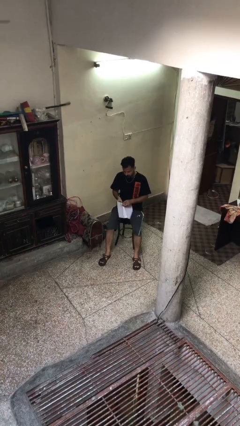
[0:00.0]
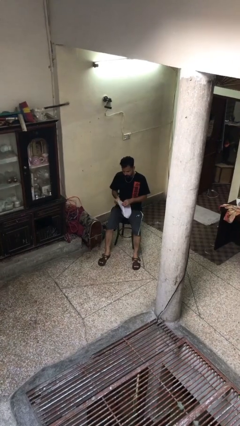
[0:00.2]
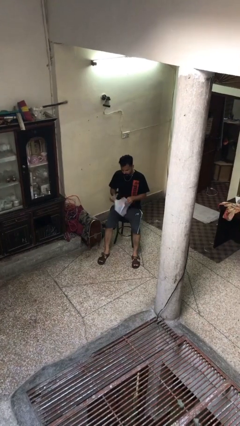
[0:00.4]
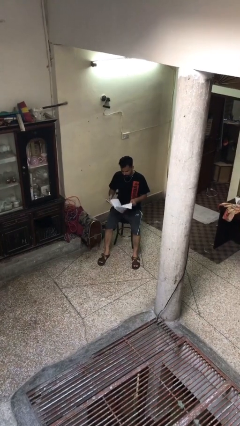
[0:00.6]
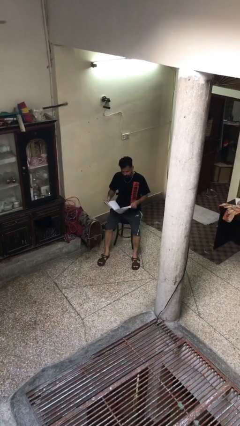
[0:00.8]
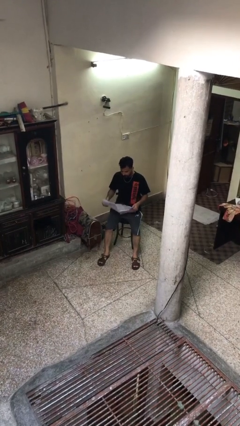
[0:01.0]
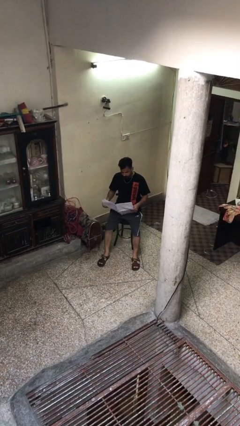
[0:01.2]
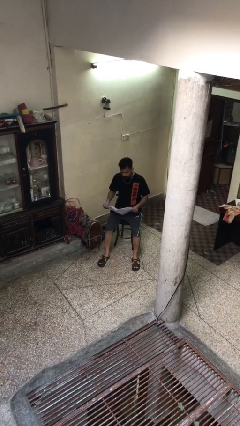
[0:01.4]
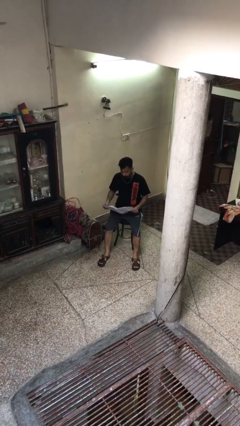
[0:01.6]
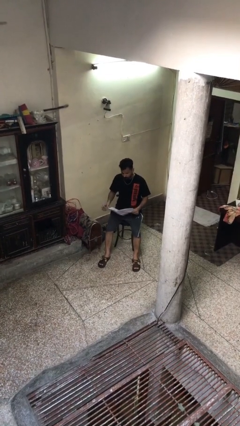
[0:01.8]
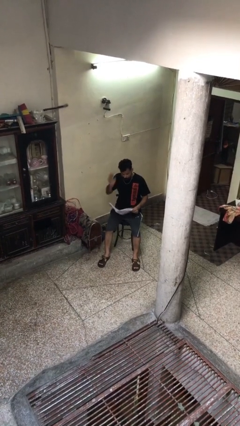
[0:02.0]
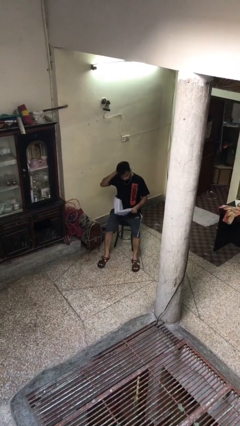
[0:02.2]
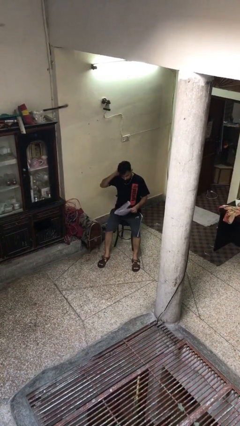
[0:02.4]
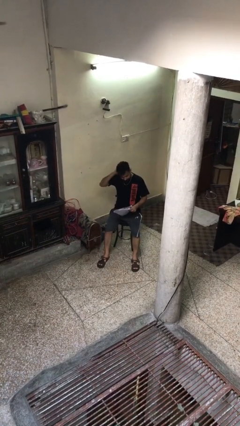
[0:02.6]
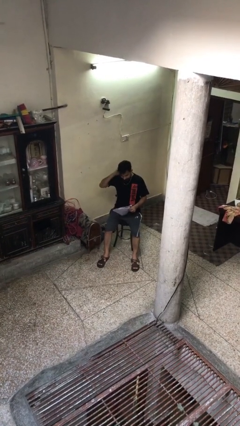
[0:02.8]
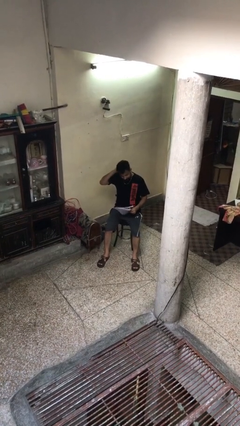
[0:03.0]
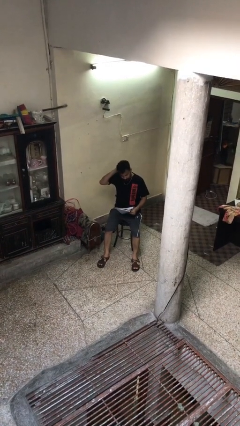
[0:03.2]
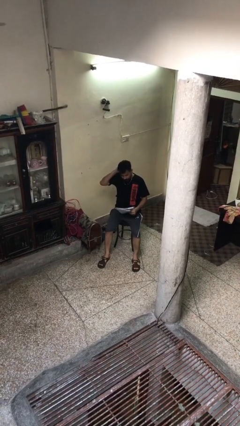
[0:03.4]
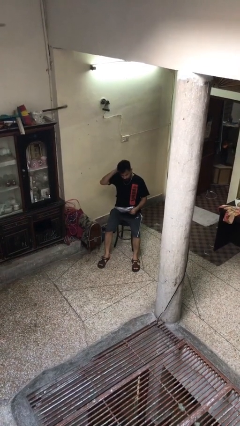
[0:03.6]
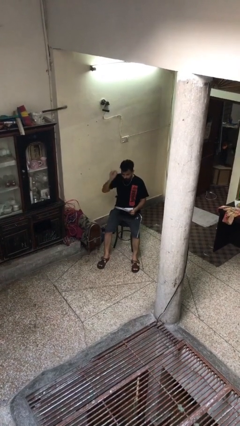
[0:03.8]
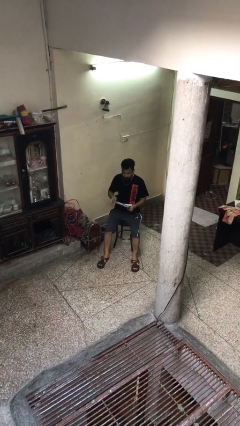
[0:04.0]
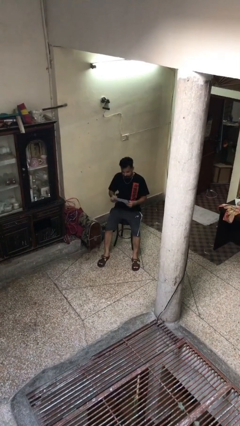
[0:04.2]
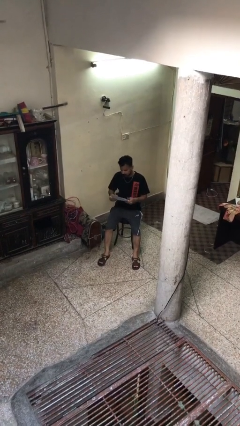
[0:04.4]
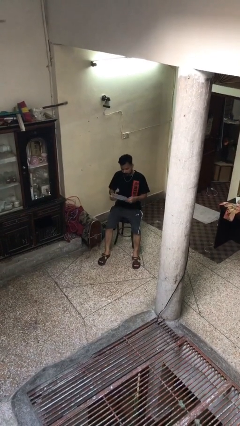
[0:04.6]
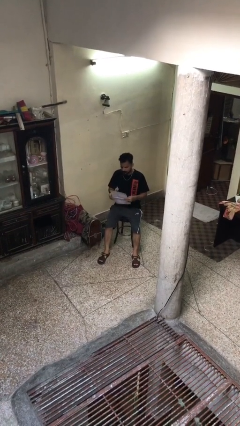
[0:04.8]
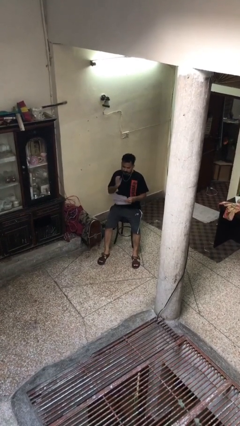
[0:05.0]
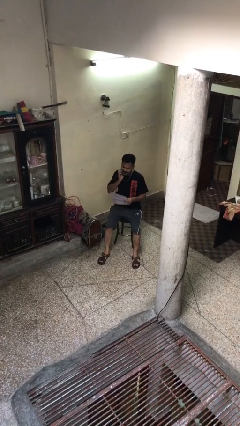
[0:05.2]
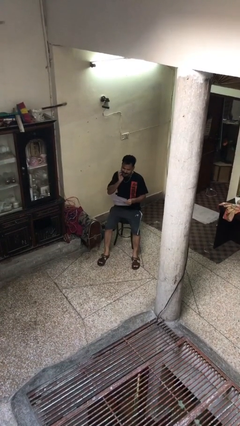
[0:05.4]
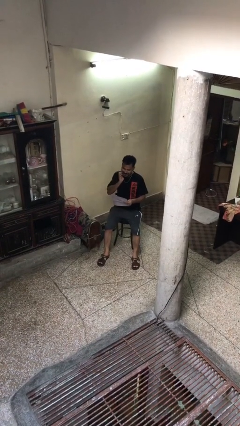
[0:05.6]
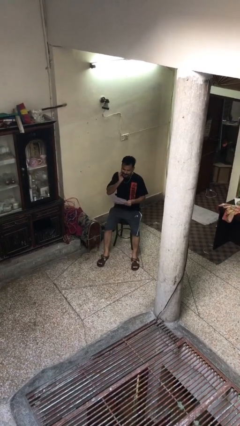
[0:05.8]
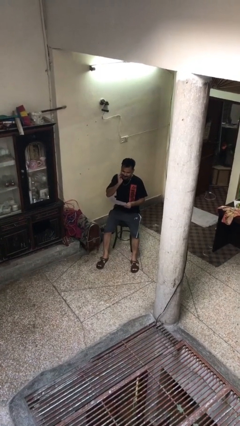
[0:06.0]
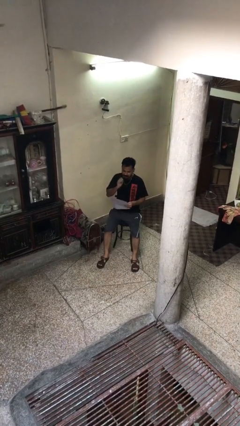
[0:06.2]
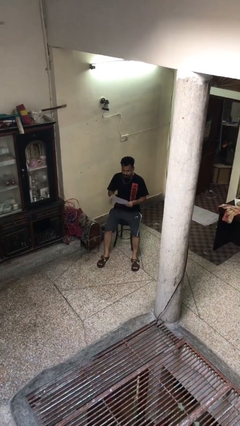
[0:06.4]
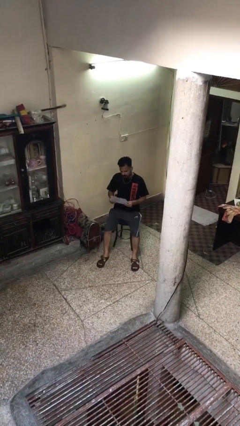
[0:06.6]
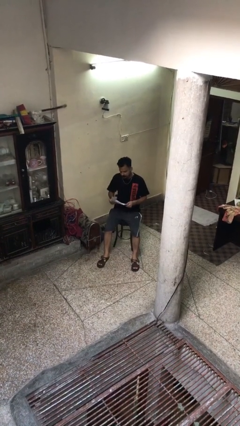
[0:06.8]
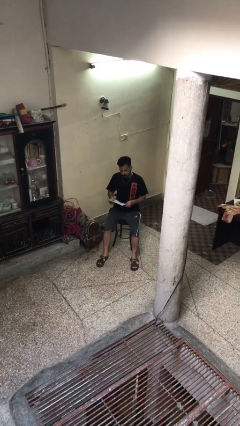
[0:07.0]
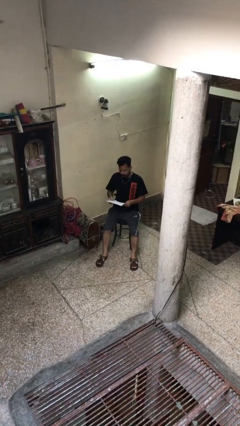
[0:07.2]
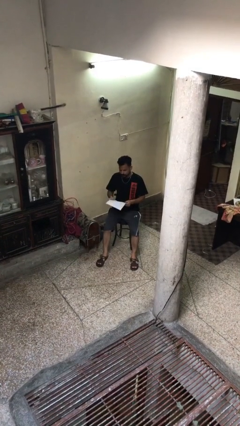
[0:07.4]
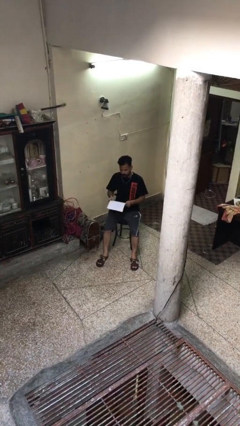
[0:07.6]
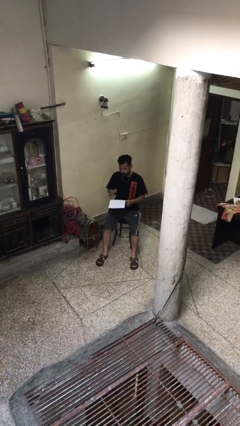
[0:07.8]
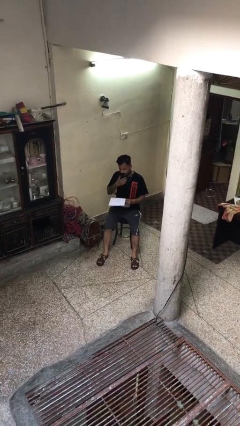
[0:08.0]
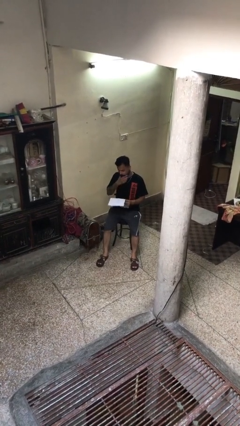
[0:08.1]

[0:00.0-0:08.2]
person reads document

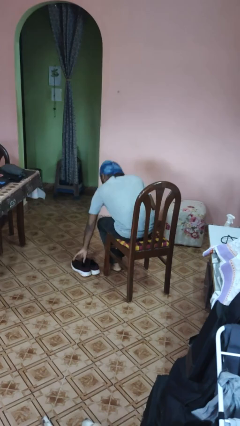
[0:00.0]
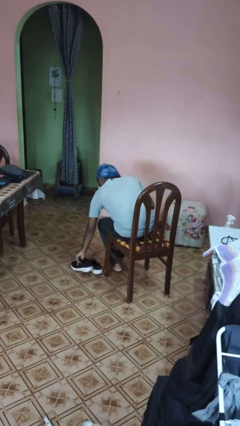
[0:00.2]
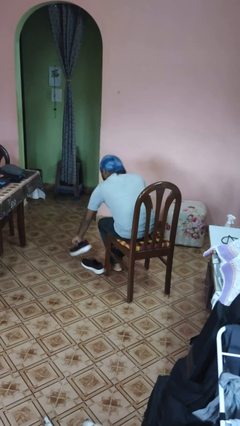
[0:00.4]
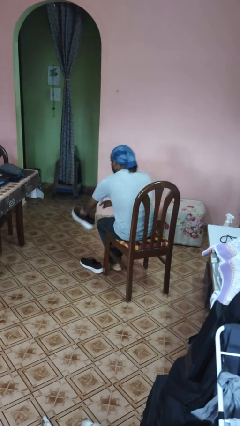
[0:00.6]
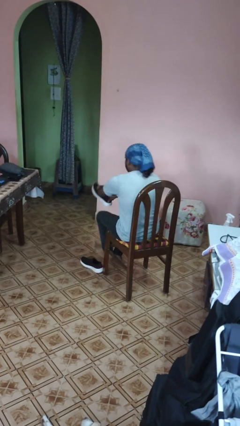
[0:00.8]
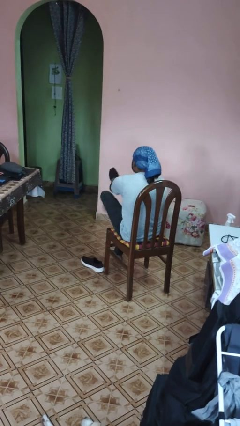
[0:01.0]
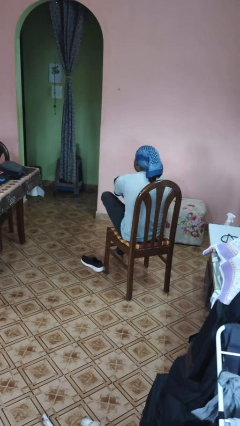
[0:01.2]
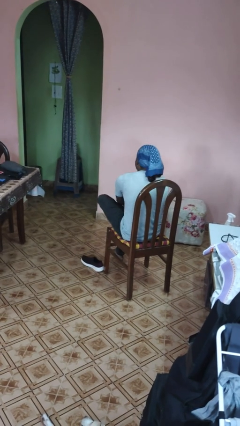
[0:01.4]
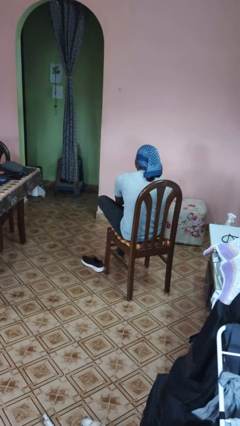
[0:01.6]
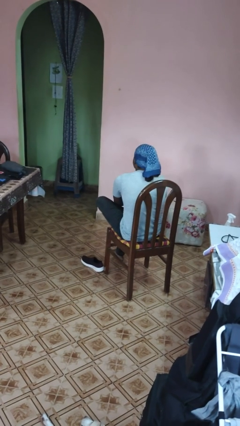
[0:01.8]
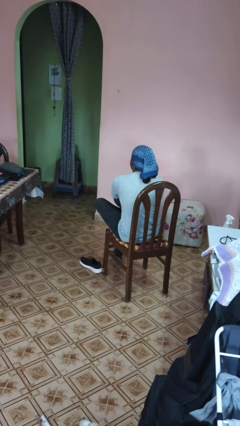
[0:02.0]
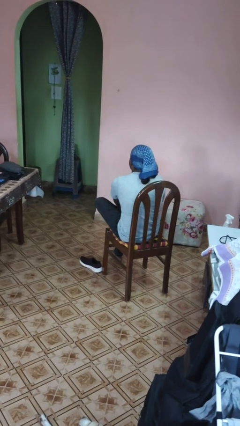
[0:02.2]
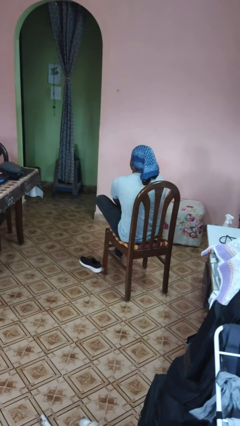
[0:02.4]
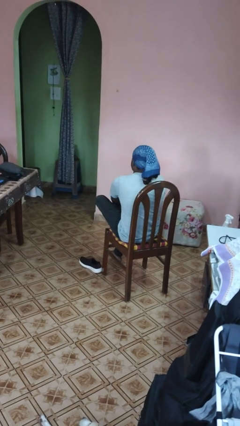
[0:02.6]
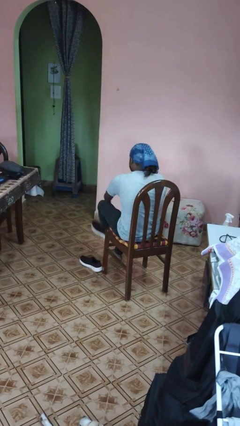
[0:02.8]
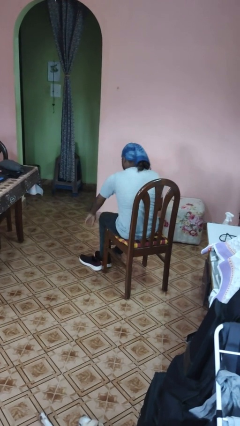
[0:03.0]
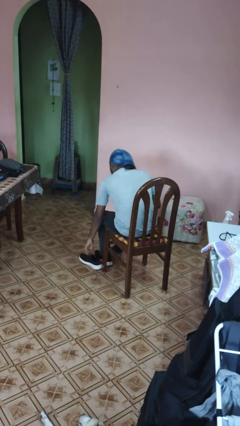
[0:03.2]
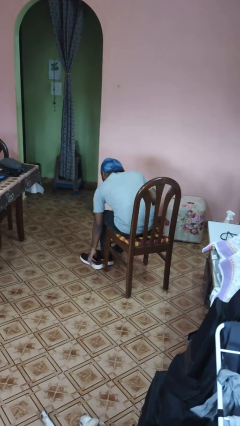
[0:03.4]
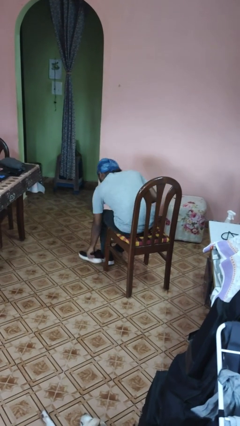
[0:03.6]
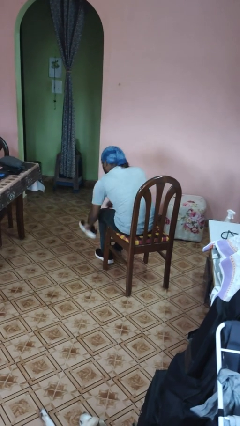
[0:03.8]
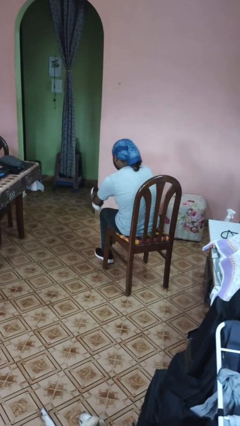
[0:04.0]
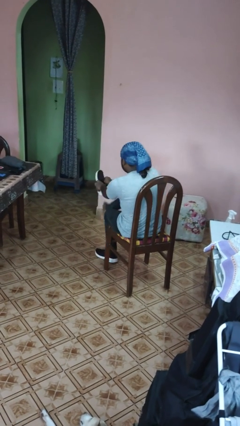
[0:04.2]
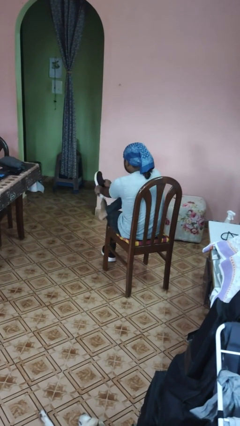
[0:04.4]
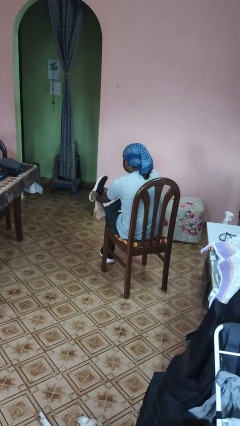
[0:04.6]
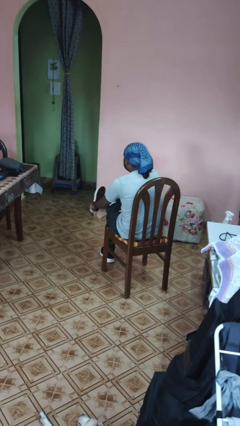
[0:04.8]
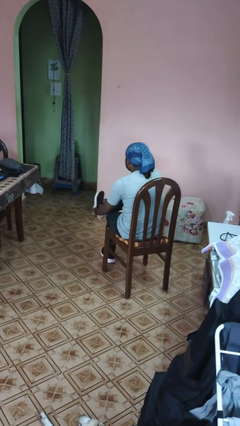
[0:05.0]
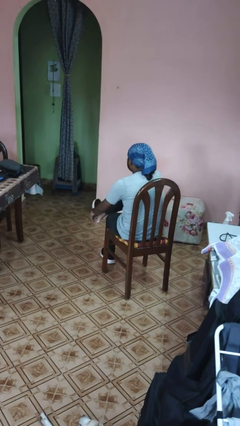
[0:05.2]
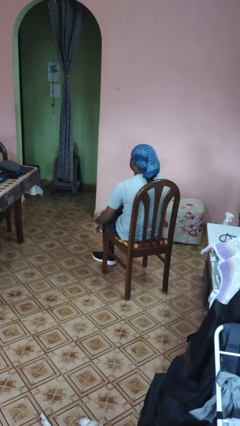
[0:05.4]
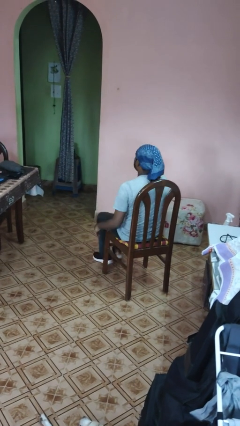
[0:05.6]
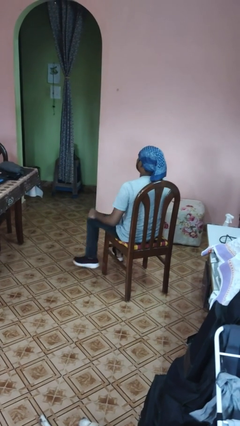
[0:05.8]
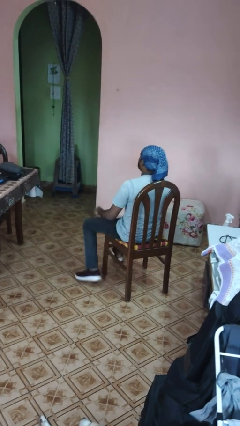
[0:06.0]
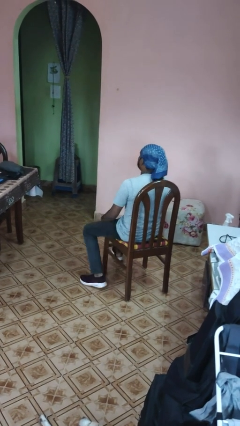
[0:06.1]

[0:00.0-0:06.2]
person puts on shoes

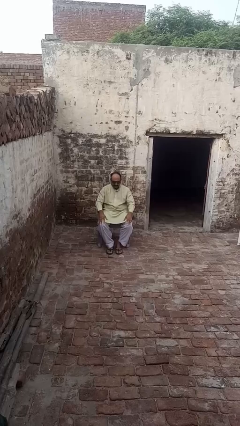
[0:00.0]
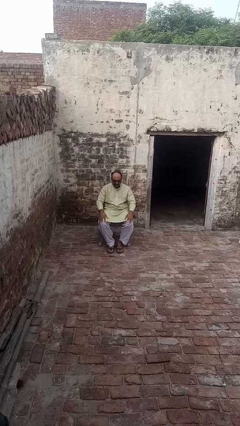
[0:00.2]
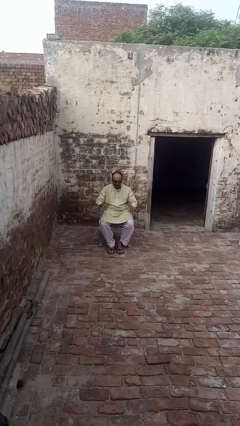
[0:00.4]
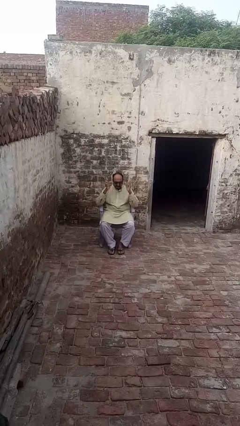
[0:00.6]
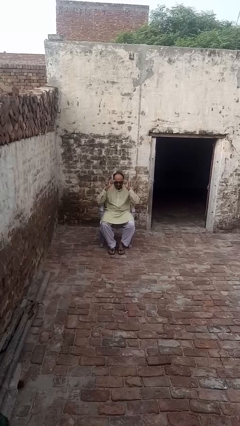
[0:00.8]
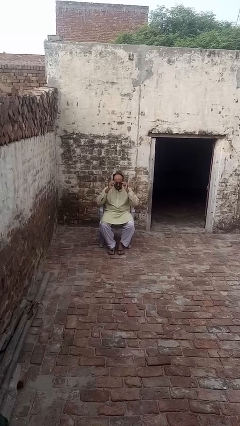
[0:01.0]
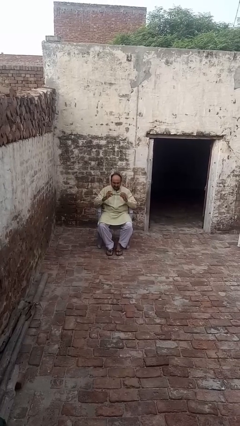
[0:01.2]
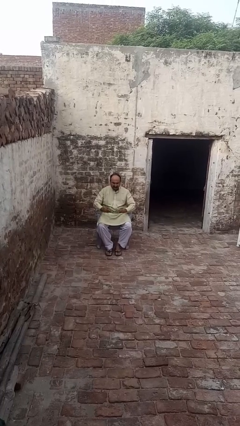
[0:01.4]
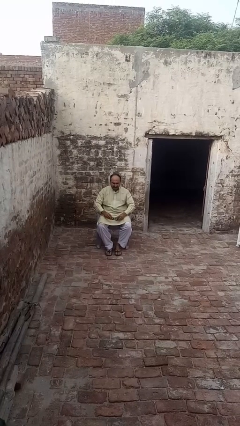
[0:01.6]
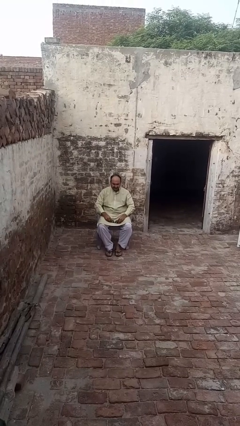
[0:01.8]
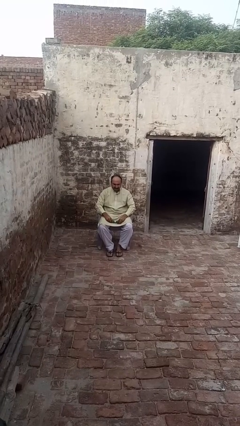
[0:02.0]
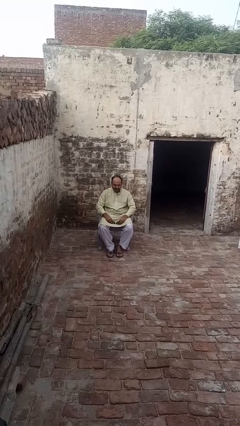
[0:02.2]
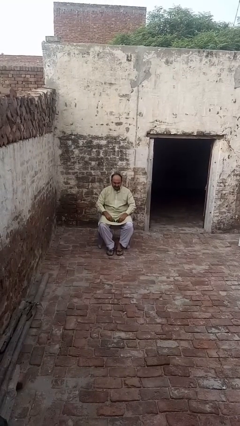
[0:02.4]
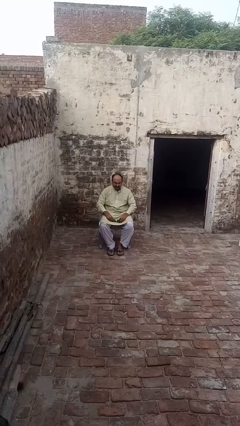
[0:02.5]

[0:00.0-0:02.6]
person takes off sunglasses

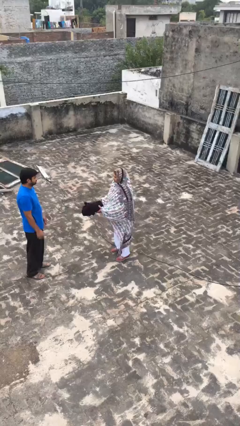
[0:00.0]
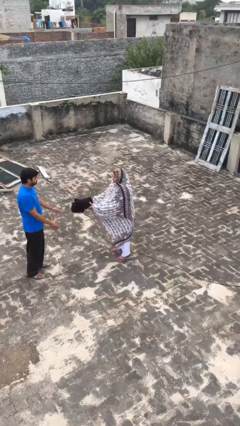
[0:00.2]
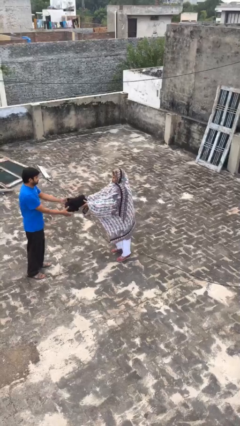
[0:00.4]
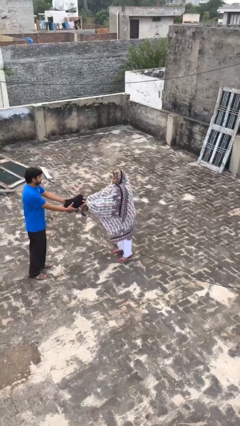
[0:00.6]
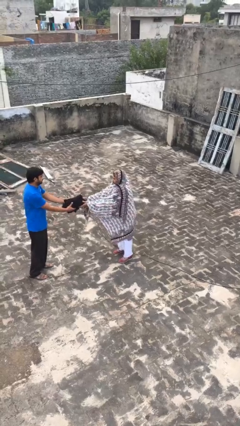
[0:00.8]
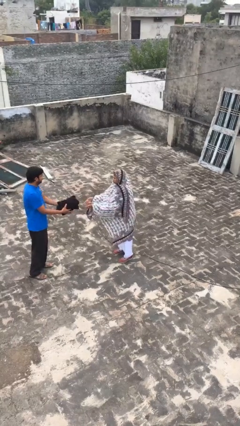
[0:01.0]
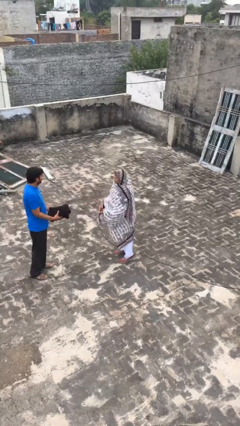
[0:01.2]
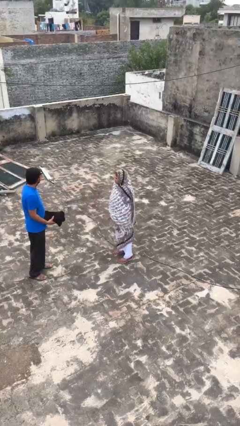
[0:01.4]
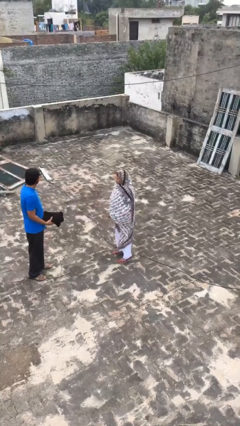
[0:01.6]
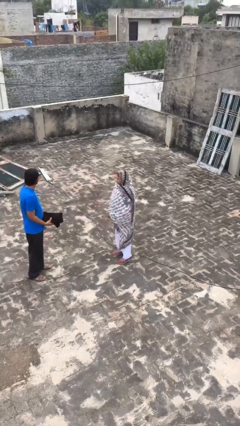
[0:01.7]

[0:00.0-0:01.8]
person transfers object to person
